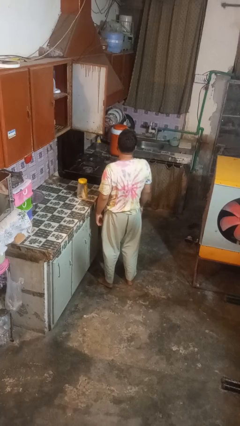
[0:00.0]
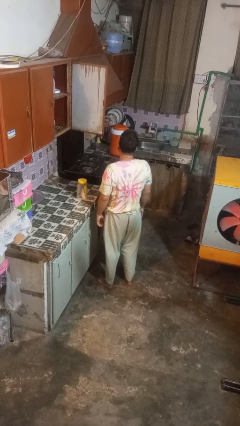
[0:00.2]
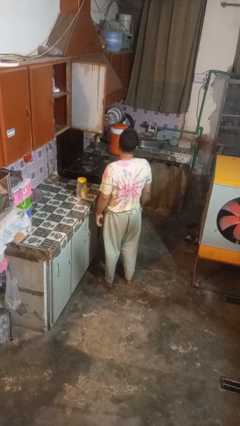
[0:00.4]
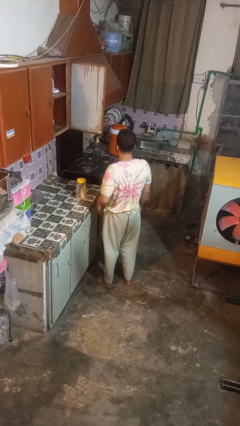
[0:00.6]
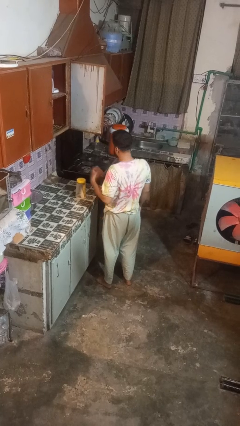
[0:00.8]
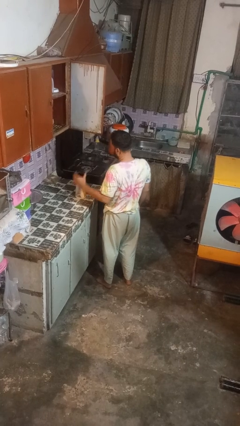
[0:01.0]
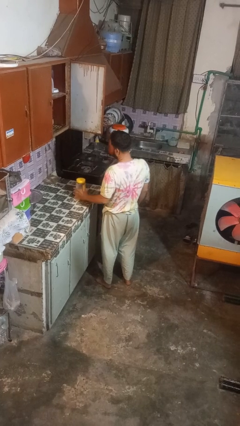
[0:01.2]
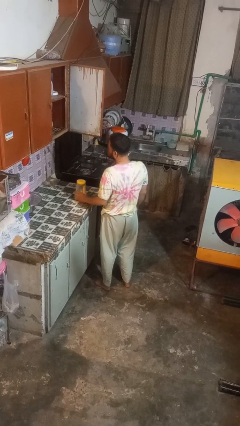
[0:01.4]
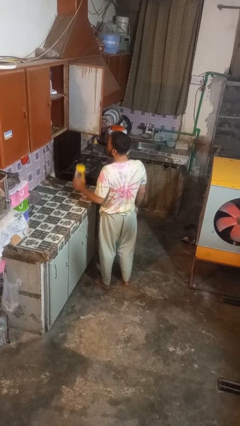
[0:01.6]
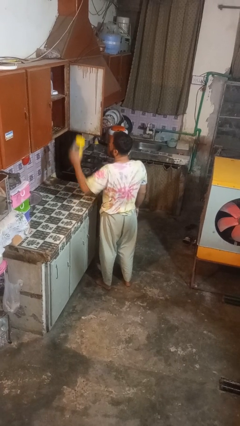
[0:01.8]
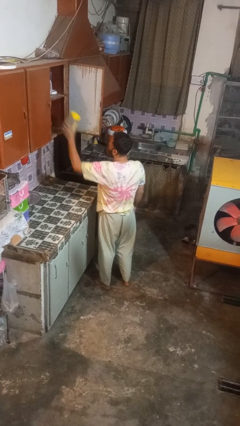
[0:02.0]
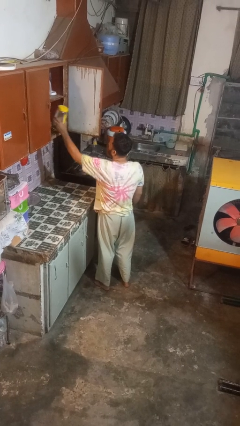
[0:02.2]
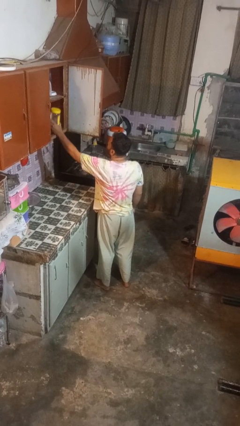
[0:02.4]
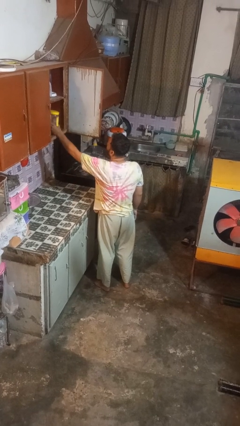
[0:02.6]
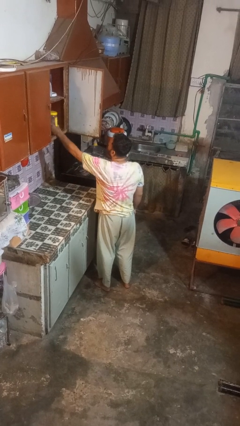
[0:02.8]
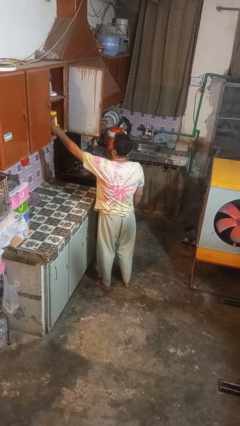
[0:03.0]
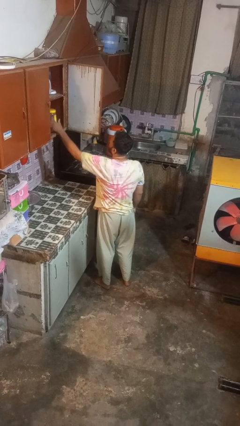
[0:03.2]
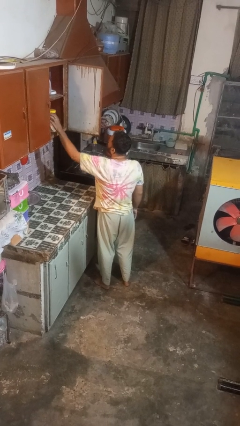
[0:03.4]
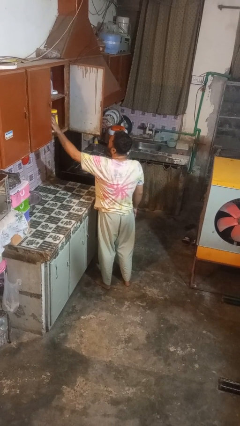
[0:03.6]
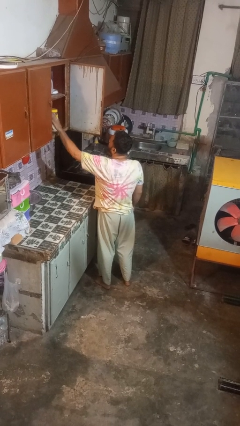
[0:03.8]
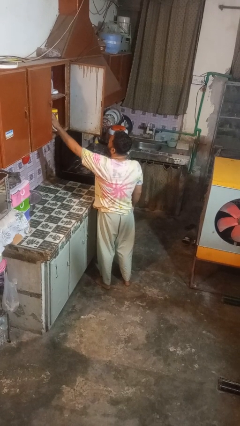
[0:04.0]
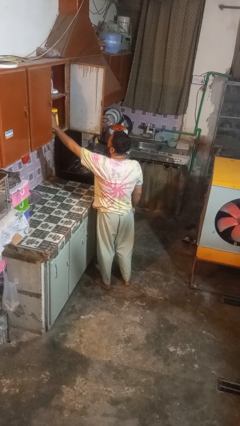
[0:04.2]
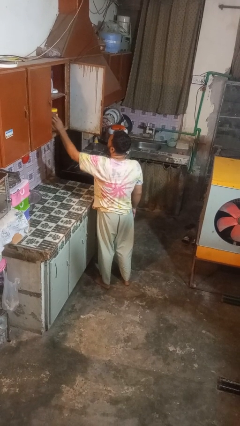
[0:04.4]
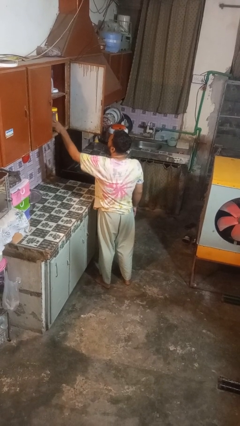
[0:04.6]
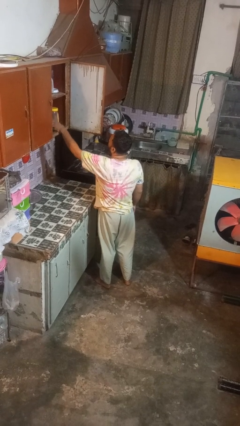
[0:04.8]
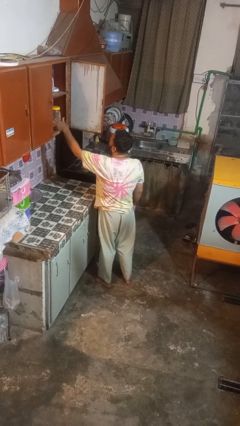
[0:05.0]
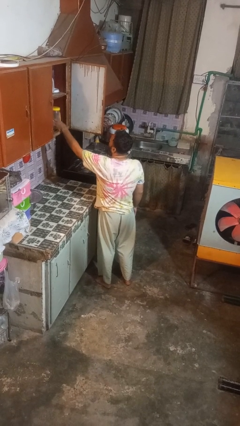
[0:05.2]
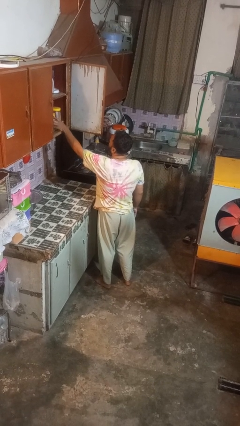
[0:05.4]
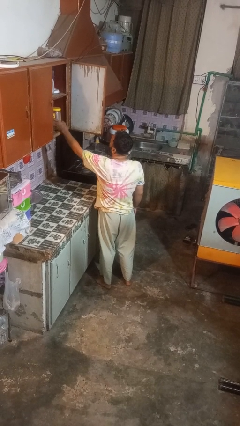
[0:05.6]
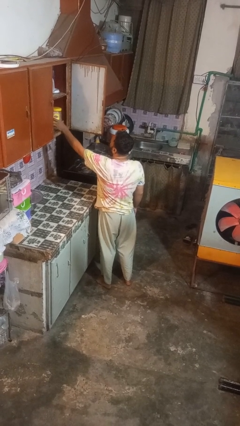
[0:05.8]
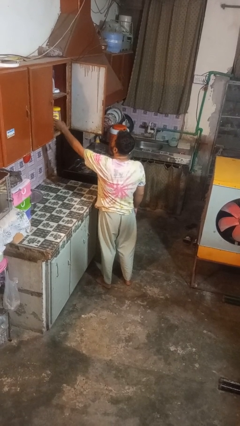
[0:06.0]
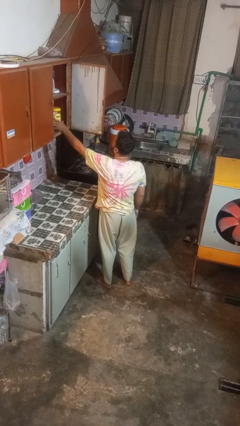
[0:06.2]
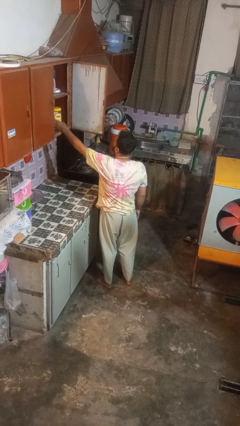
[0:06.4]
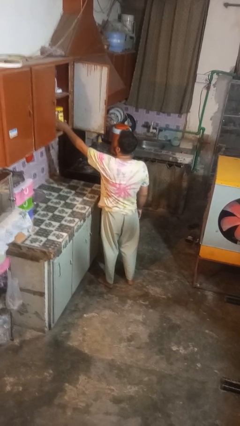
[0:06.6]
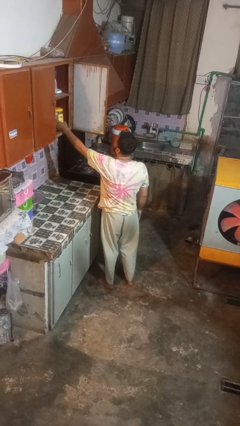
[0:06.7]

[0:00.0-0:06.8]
person puts object in cabinet

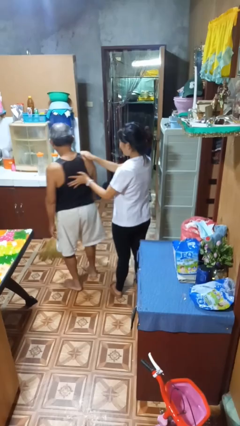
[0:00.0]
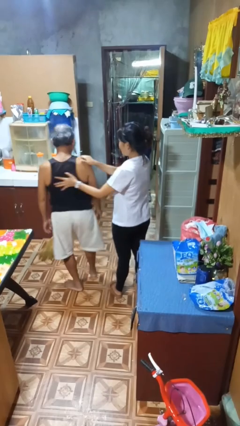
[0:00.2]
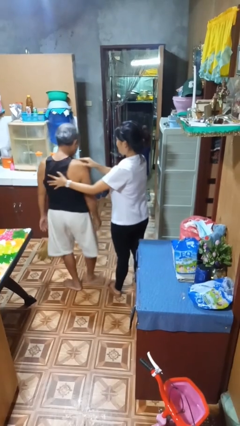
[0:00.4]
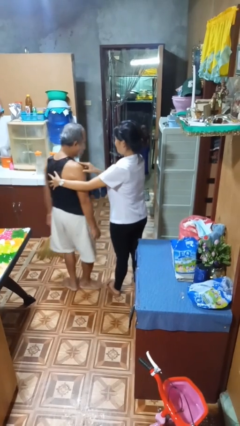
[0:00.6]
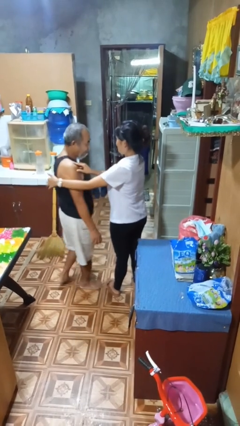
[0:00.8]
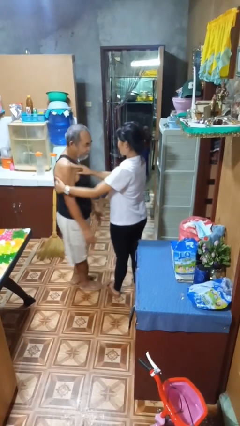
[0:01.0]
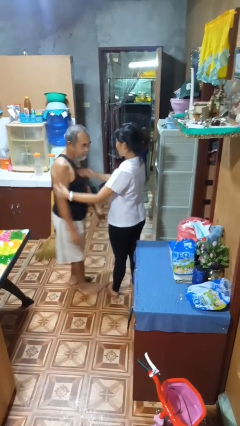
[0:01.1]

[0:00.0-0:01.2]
person spins person around

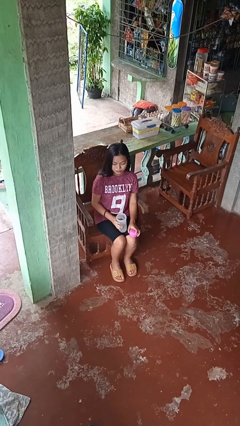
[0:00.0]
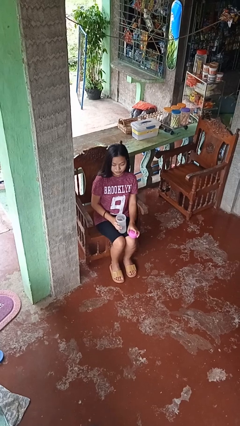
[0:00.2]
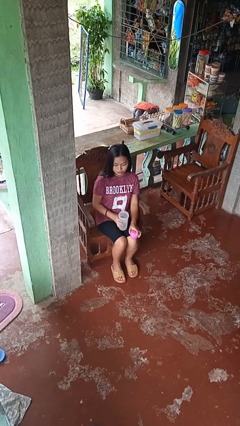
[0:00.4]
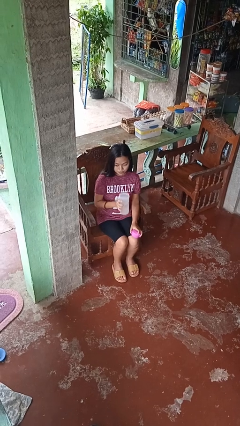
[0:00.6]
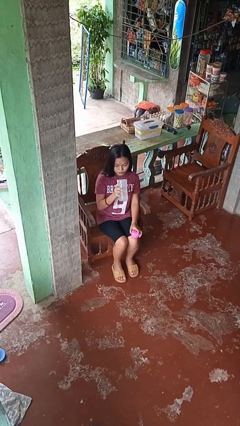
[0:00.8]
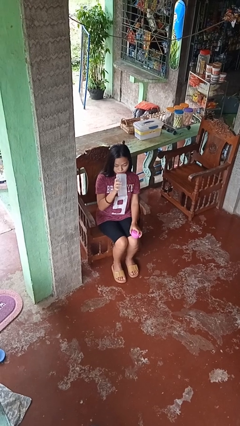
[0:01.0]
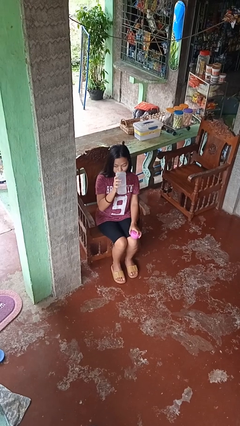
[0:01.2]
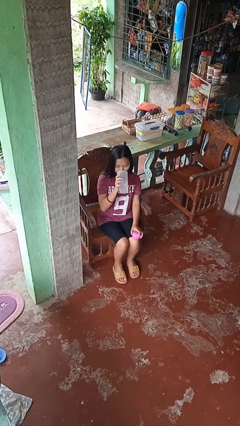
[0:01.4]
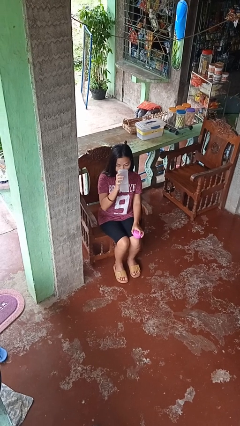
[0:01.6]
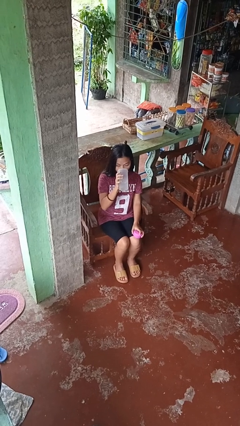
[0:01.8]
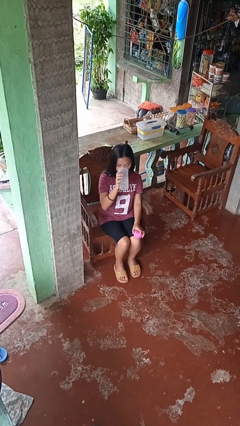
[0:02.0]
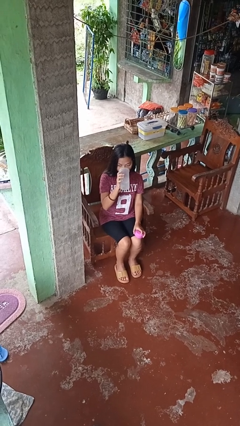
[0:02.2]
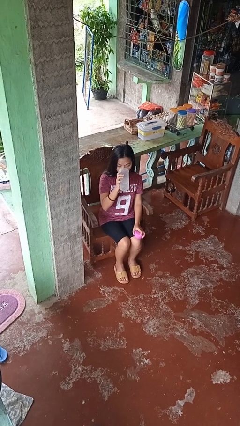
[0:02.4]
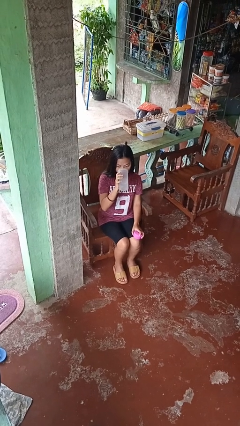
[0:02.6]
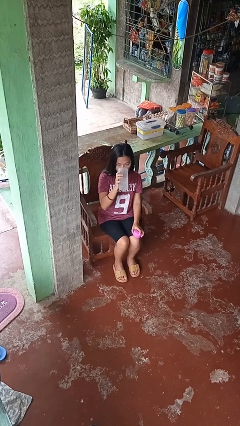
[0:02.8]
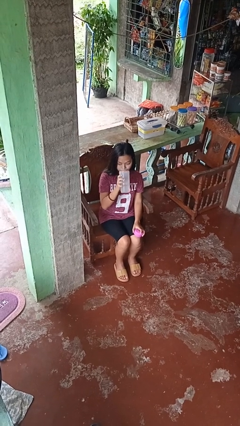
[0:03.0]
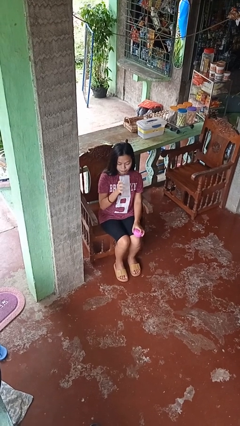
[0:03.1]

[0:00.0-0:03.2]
person drinks from bottle

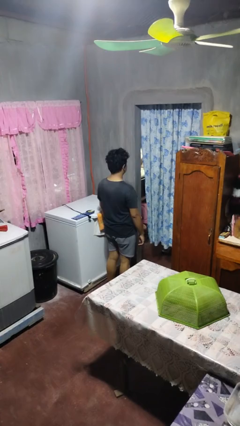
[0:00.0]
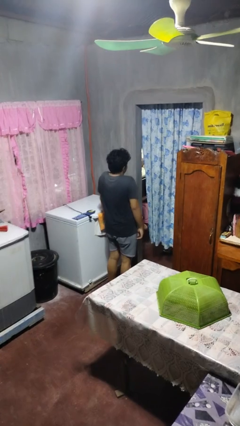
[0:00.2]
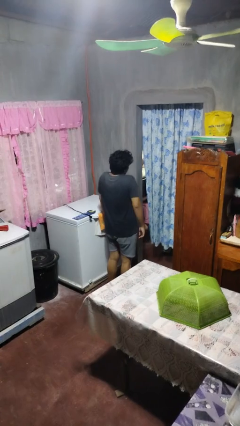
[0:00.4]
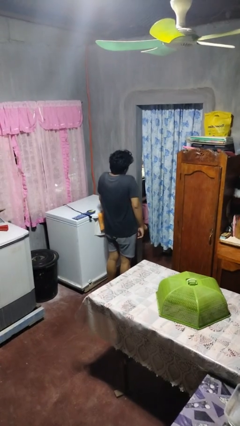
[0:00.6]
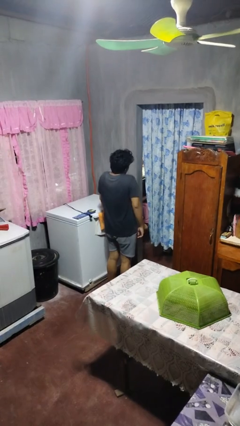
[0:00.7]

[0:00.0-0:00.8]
person shrugs

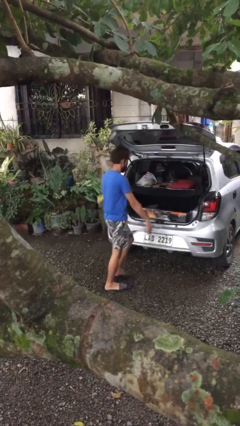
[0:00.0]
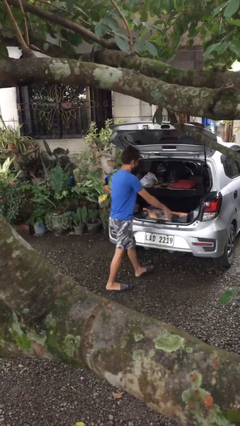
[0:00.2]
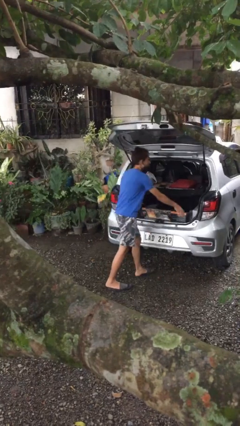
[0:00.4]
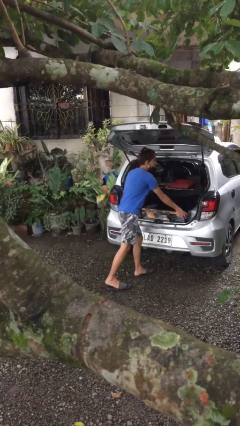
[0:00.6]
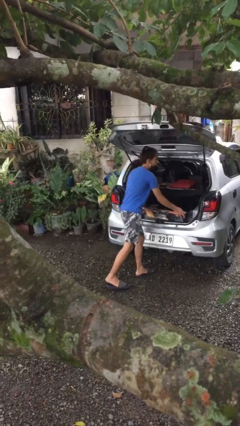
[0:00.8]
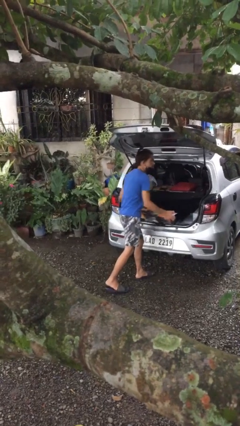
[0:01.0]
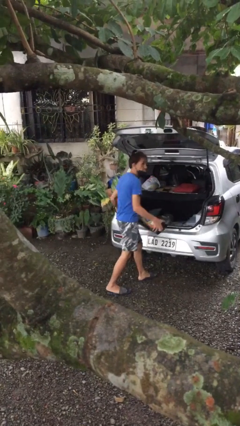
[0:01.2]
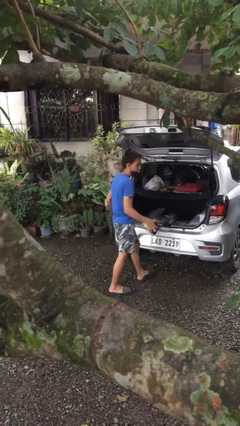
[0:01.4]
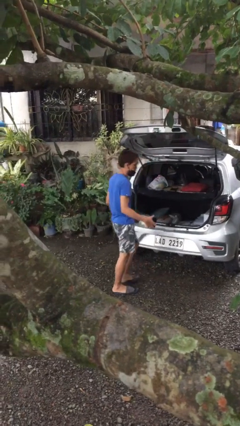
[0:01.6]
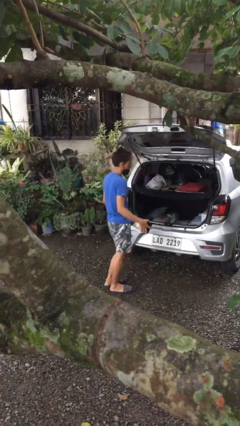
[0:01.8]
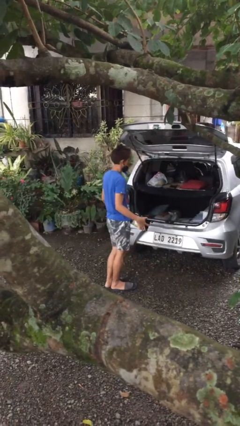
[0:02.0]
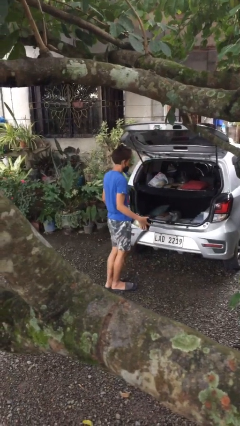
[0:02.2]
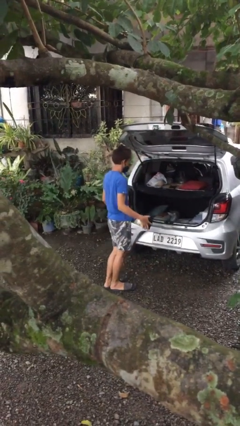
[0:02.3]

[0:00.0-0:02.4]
person unloads car

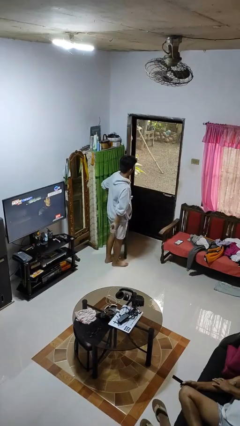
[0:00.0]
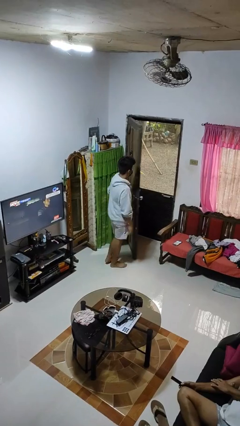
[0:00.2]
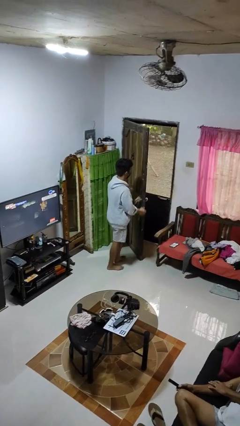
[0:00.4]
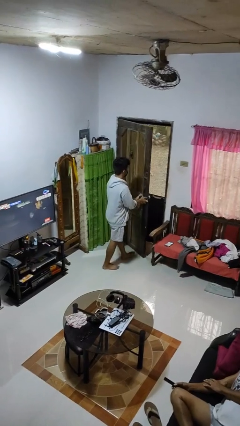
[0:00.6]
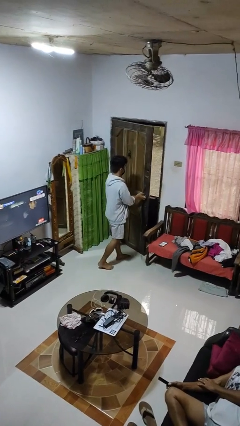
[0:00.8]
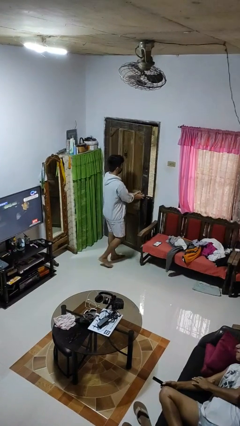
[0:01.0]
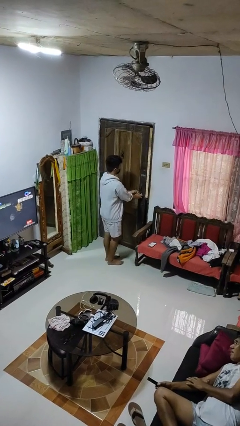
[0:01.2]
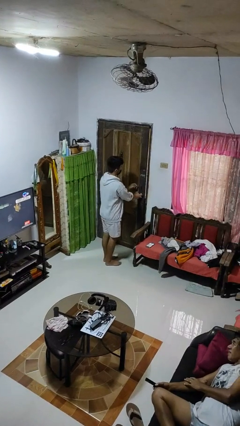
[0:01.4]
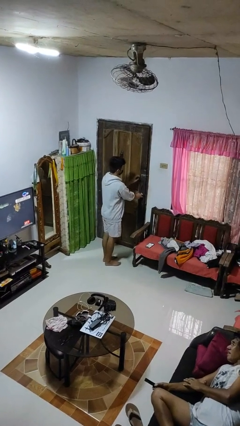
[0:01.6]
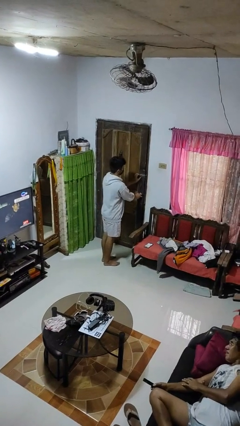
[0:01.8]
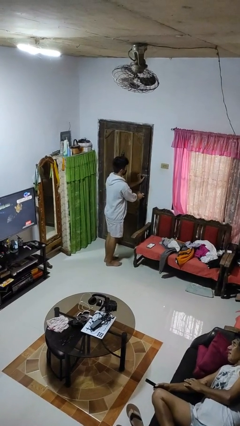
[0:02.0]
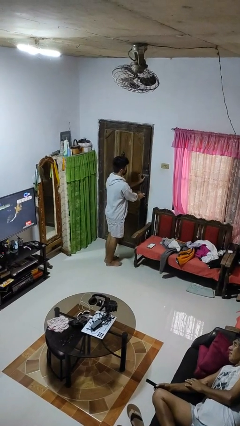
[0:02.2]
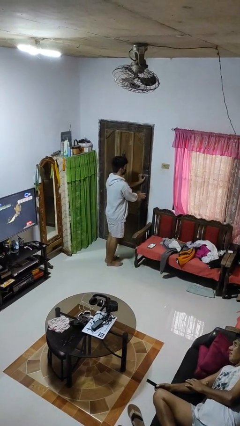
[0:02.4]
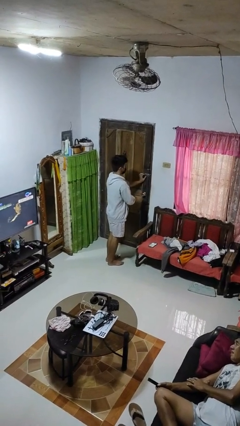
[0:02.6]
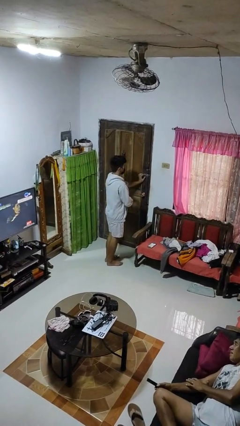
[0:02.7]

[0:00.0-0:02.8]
person closes facility door
